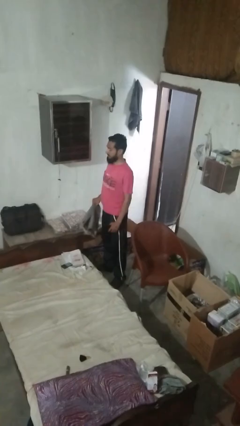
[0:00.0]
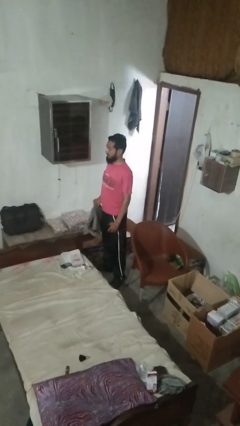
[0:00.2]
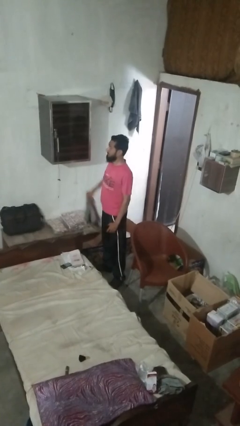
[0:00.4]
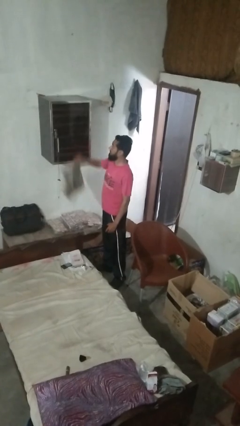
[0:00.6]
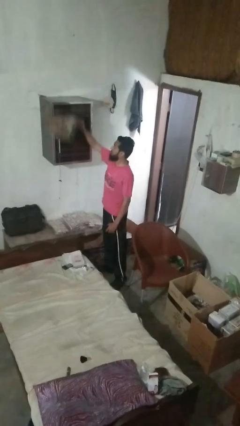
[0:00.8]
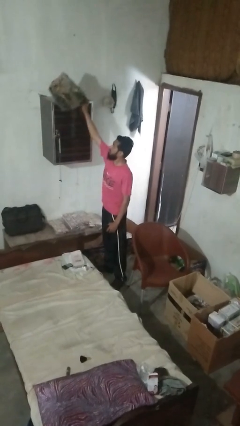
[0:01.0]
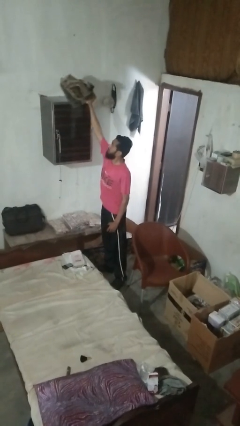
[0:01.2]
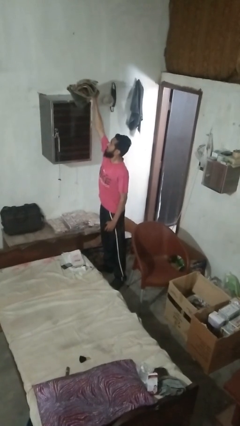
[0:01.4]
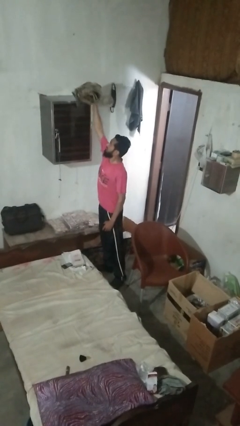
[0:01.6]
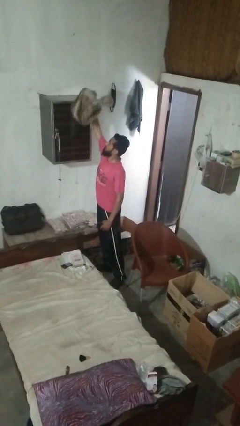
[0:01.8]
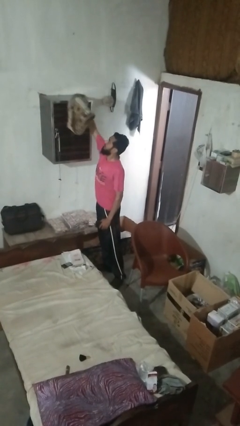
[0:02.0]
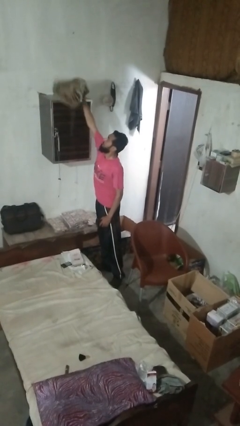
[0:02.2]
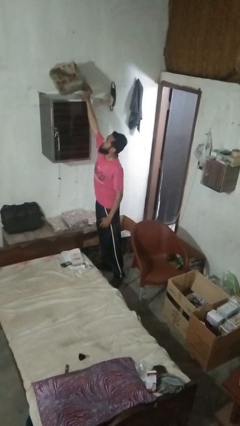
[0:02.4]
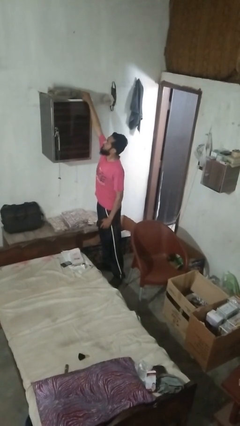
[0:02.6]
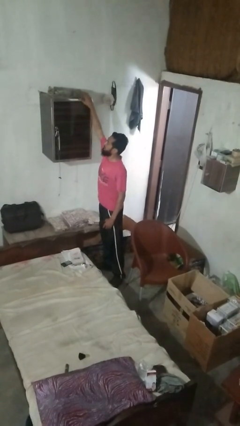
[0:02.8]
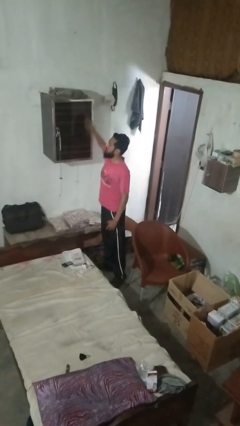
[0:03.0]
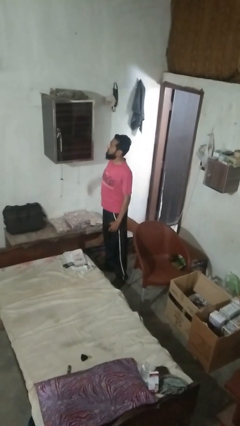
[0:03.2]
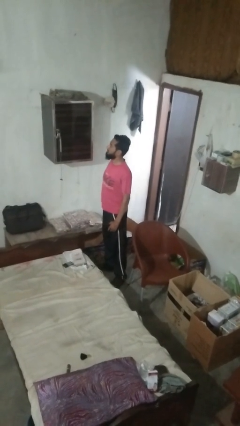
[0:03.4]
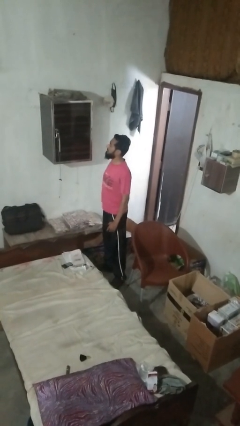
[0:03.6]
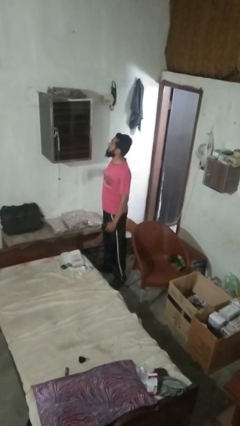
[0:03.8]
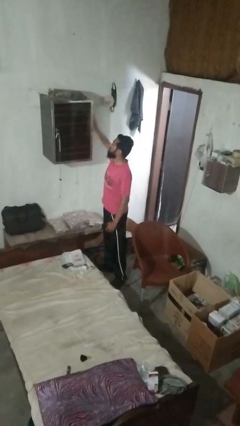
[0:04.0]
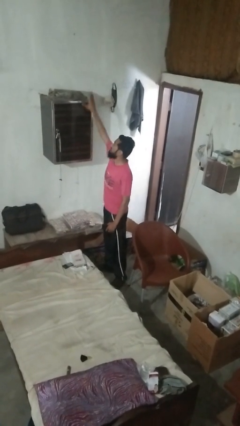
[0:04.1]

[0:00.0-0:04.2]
person puts down object on shelf

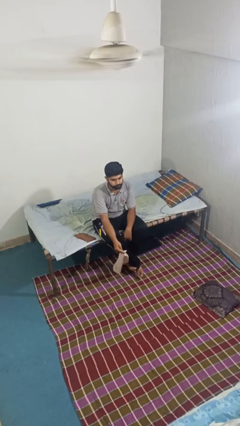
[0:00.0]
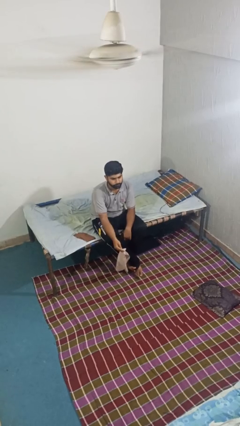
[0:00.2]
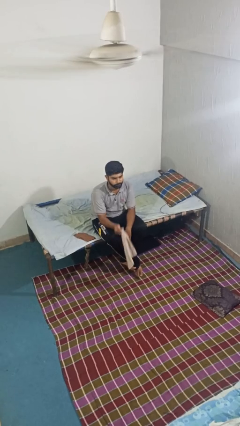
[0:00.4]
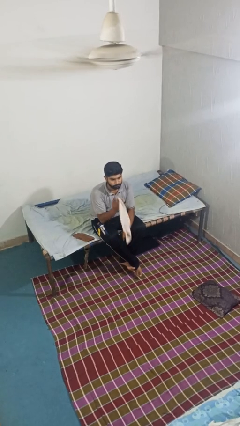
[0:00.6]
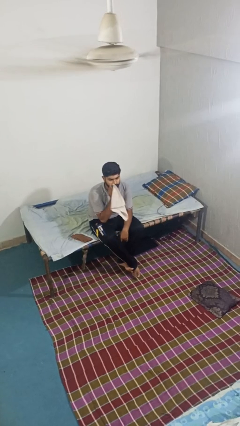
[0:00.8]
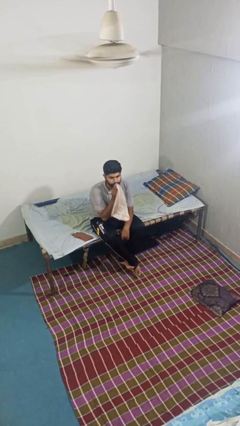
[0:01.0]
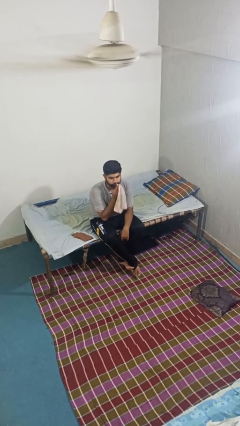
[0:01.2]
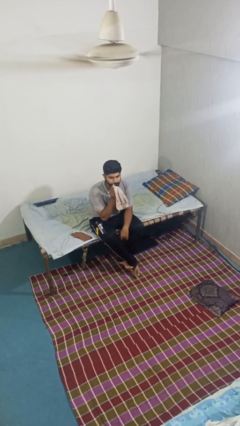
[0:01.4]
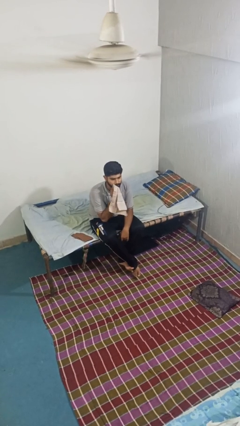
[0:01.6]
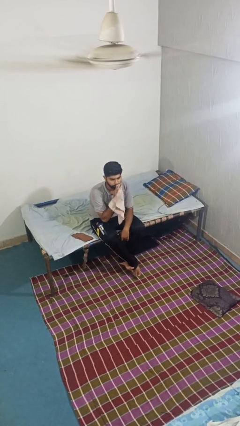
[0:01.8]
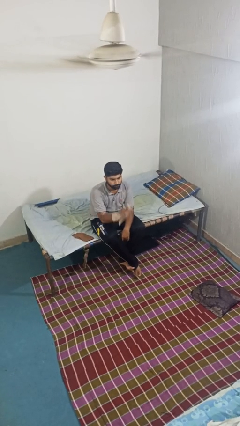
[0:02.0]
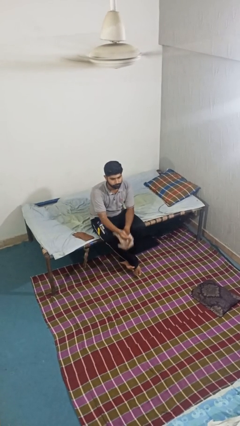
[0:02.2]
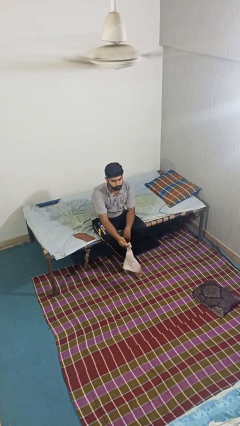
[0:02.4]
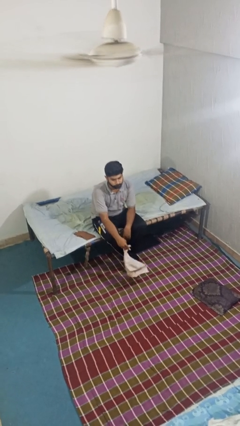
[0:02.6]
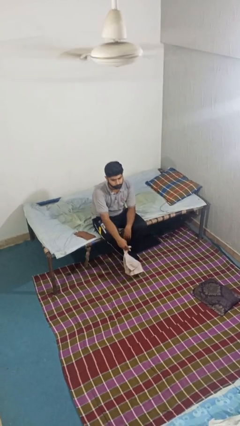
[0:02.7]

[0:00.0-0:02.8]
person wipes mouth with napkin

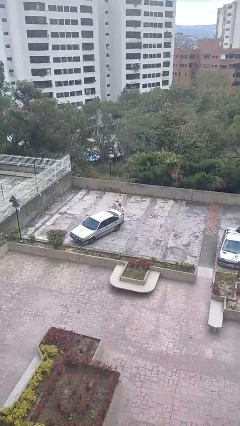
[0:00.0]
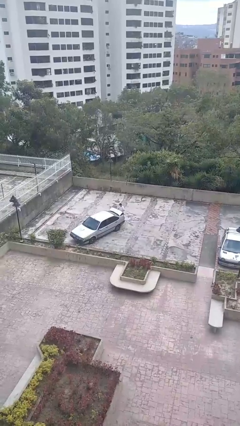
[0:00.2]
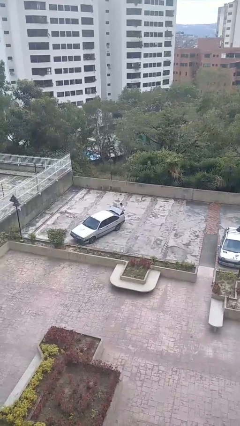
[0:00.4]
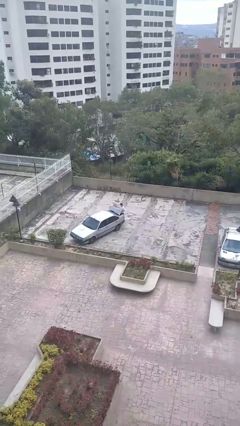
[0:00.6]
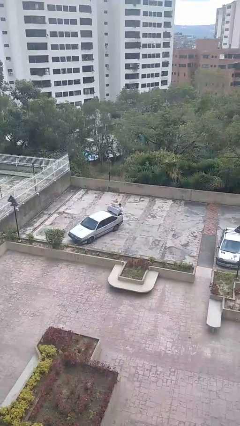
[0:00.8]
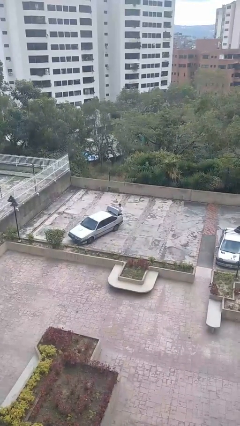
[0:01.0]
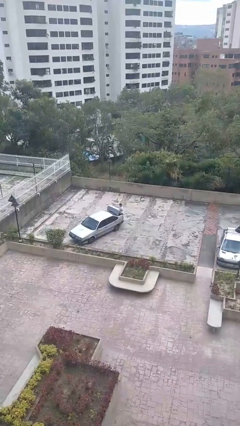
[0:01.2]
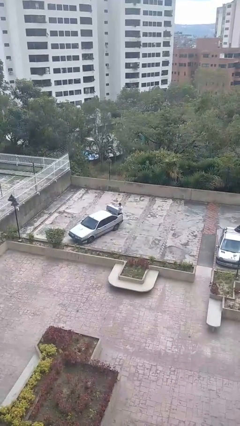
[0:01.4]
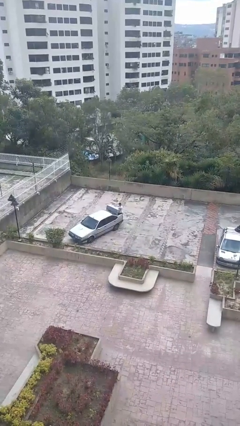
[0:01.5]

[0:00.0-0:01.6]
person opens car trunk

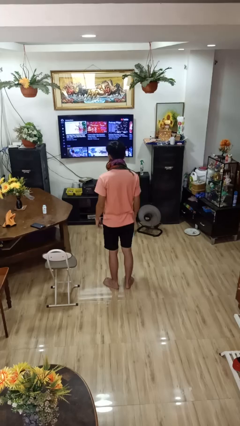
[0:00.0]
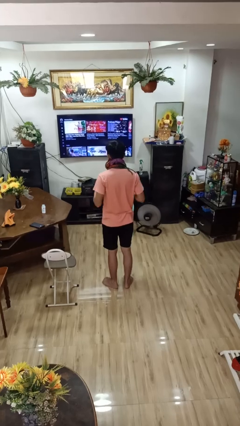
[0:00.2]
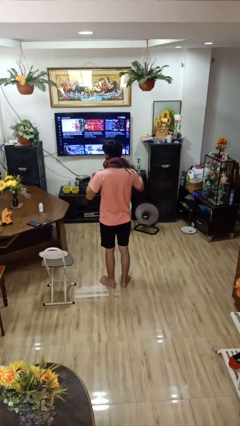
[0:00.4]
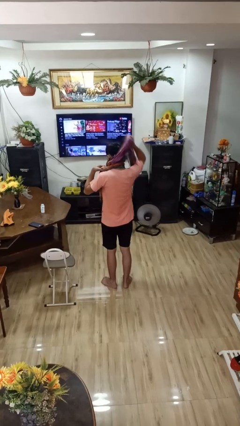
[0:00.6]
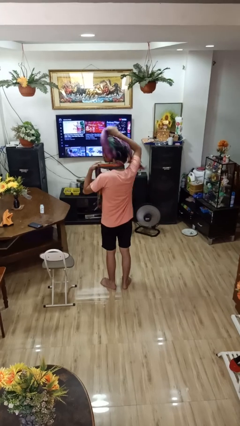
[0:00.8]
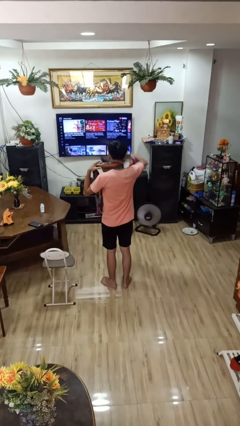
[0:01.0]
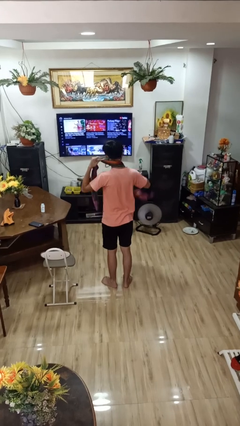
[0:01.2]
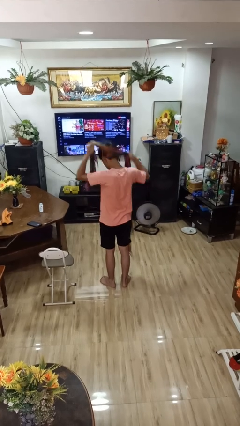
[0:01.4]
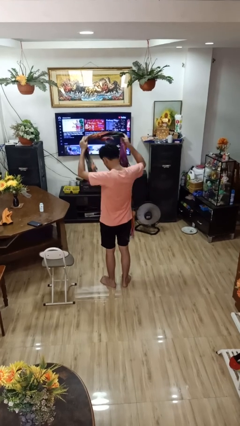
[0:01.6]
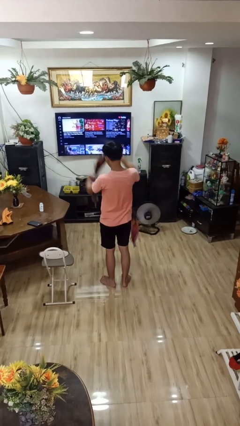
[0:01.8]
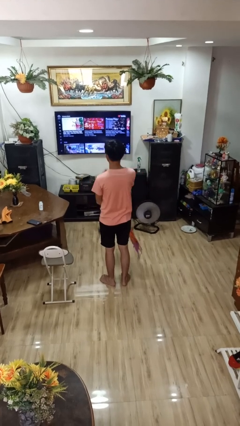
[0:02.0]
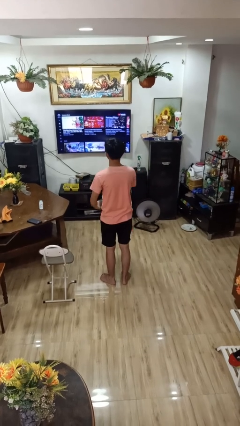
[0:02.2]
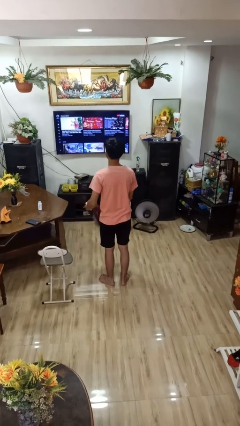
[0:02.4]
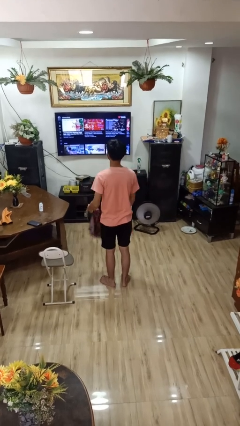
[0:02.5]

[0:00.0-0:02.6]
person takes off scarf

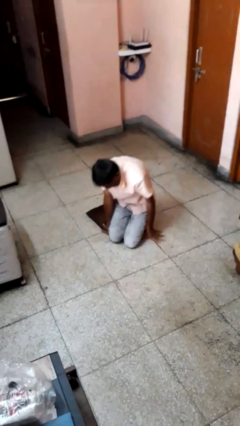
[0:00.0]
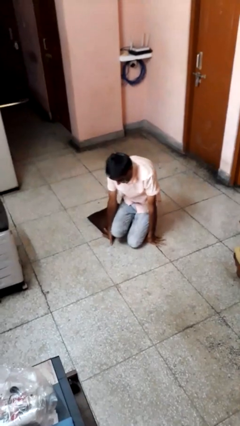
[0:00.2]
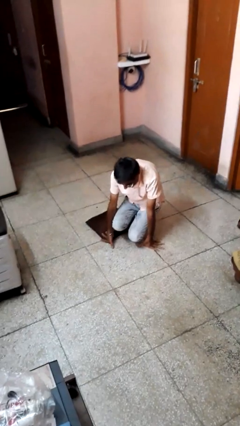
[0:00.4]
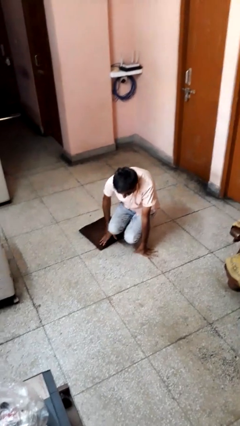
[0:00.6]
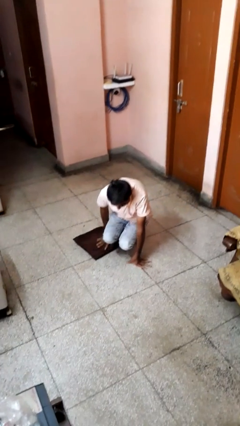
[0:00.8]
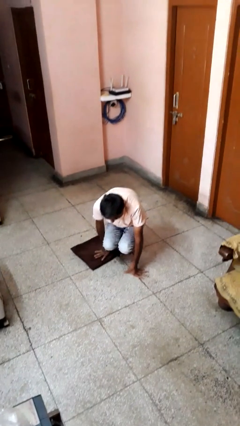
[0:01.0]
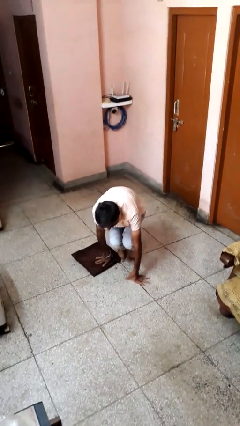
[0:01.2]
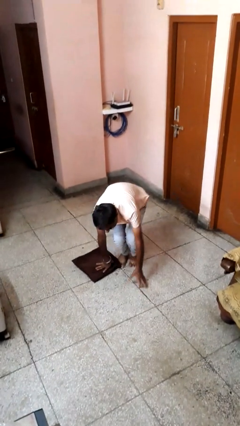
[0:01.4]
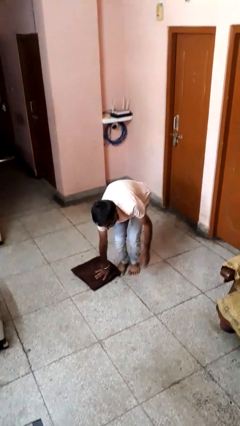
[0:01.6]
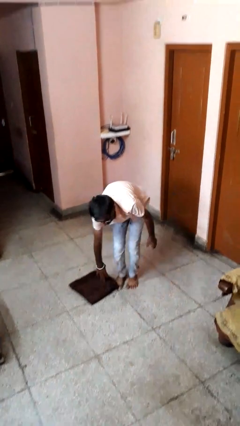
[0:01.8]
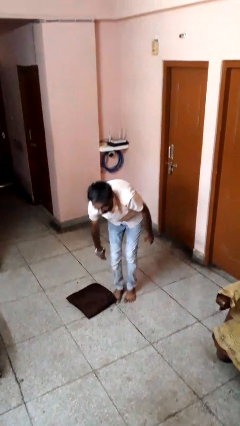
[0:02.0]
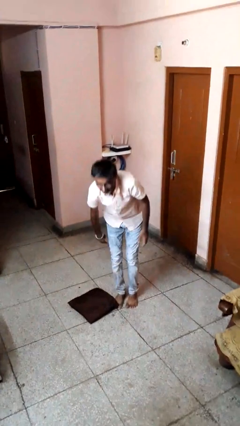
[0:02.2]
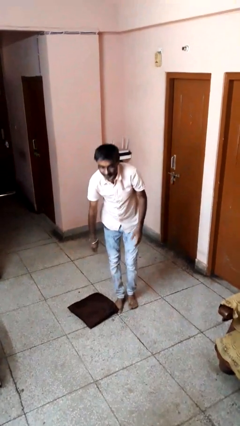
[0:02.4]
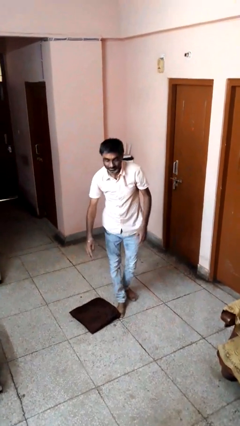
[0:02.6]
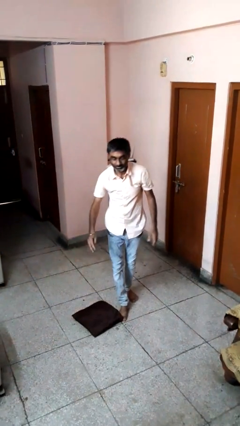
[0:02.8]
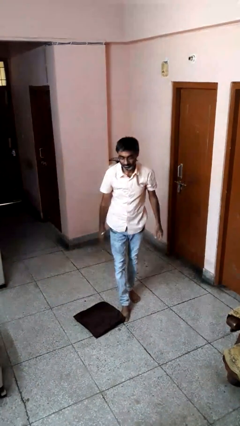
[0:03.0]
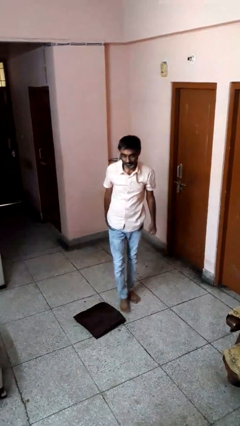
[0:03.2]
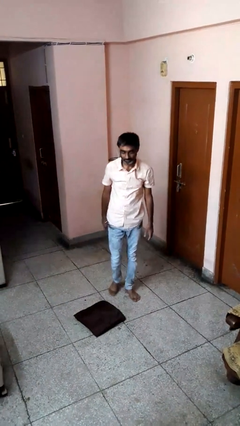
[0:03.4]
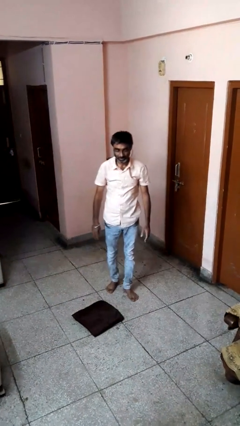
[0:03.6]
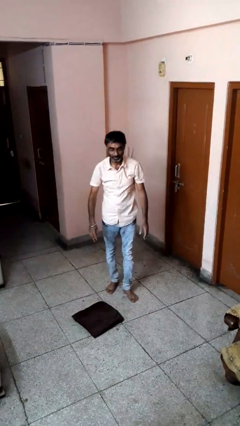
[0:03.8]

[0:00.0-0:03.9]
person stands up from floor

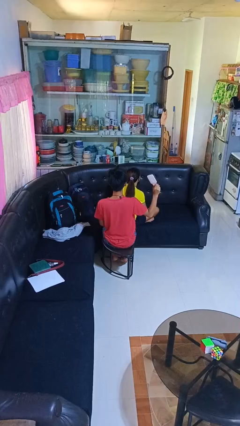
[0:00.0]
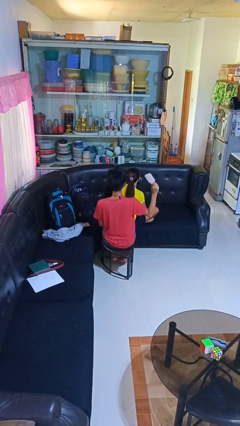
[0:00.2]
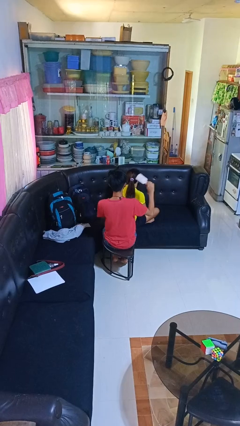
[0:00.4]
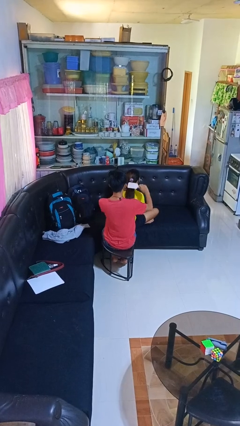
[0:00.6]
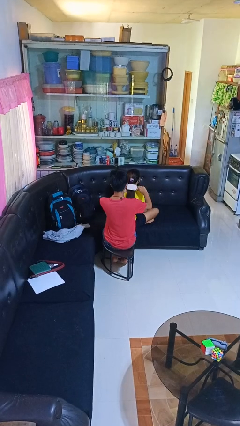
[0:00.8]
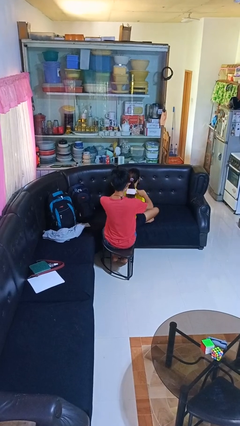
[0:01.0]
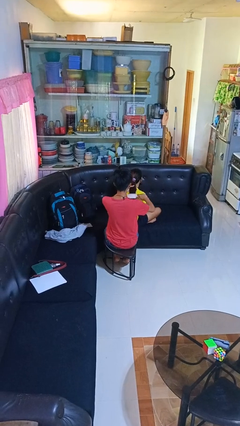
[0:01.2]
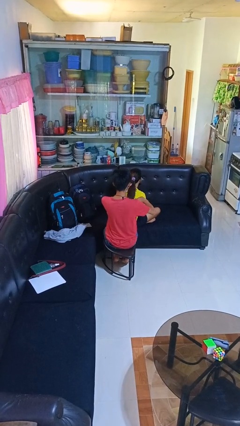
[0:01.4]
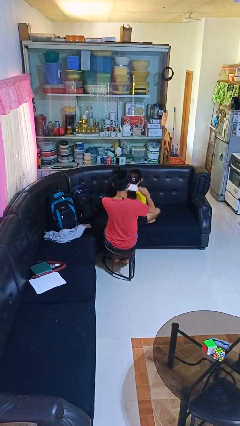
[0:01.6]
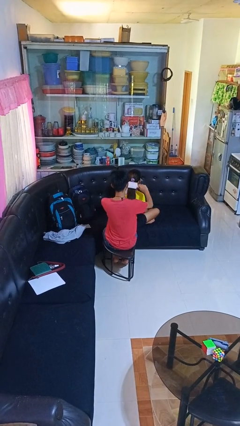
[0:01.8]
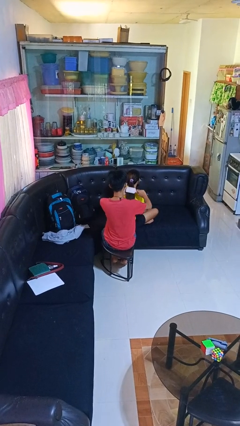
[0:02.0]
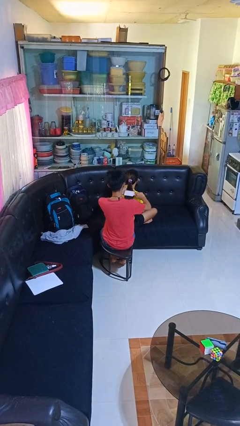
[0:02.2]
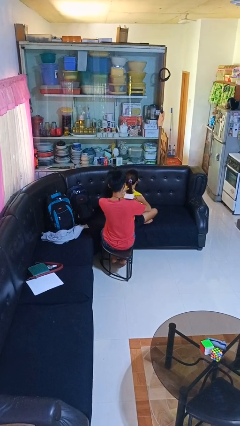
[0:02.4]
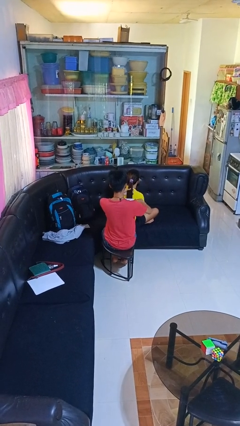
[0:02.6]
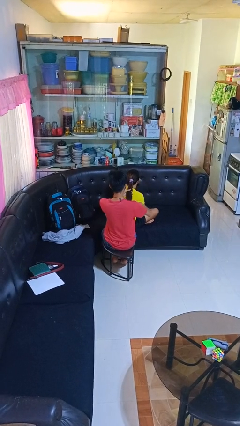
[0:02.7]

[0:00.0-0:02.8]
person brushes hair of person
